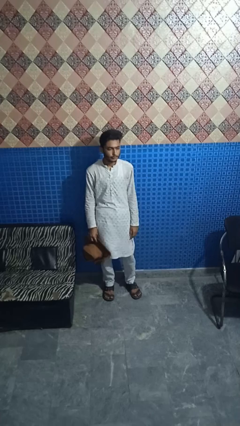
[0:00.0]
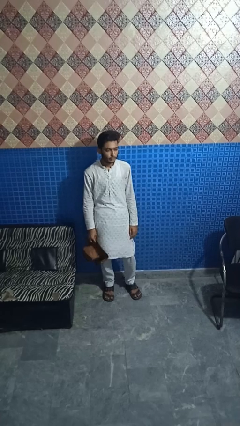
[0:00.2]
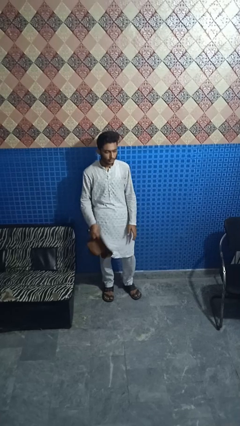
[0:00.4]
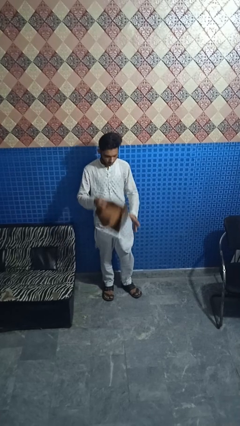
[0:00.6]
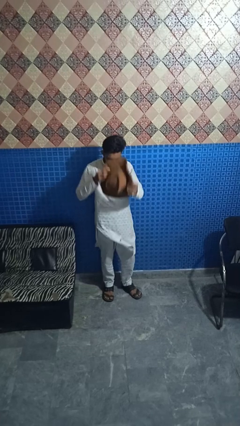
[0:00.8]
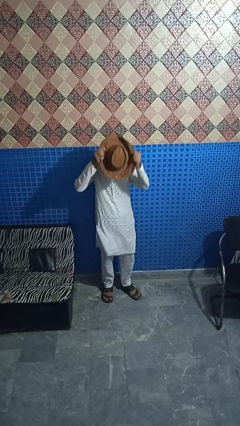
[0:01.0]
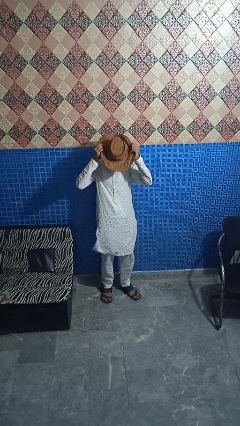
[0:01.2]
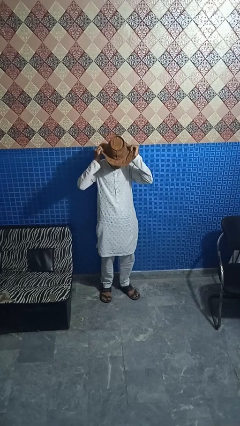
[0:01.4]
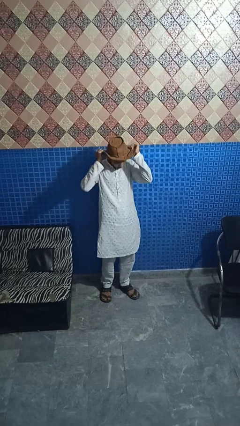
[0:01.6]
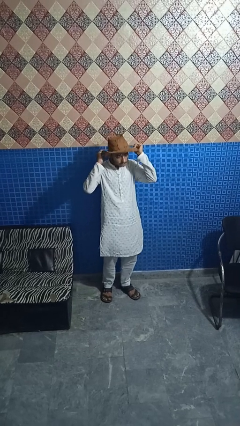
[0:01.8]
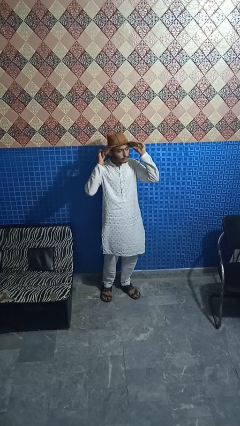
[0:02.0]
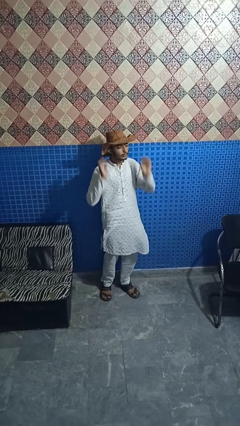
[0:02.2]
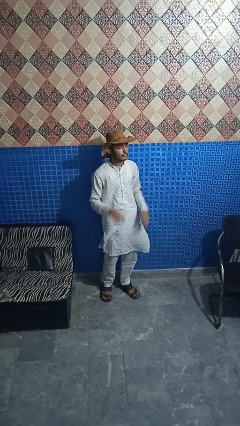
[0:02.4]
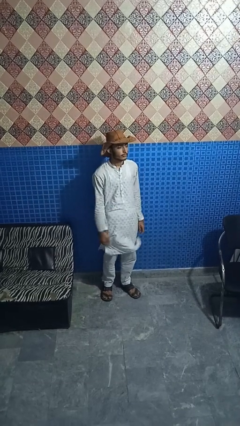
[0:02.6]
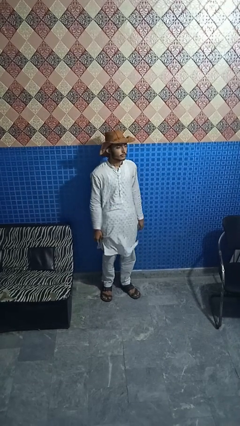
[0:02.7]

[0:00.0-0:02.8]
person puts on hat

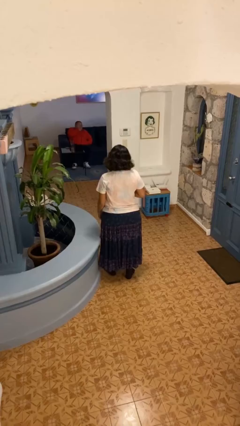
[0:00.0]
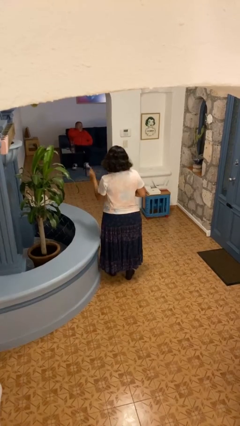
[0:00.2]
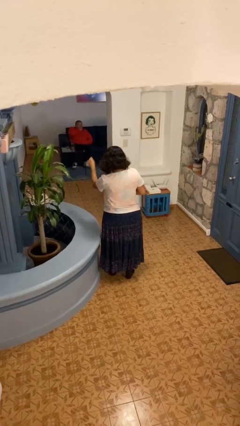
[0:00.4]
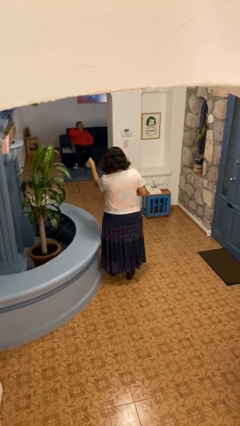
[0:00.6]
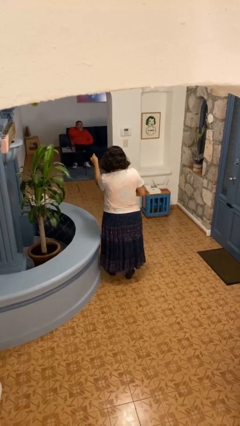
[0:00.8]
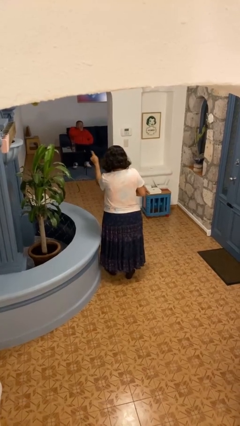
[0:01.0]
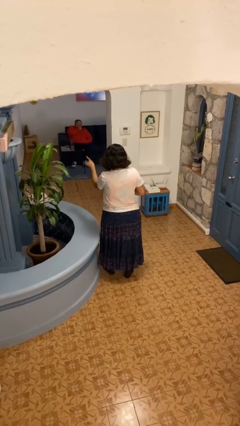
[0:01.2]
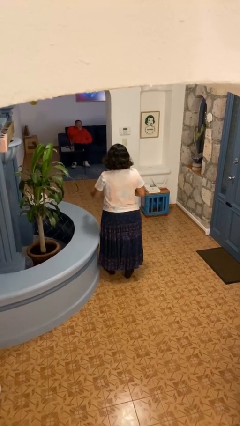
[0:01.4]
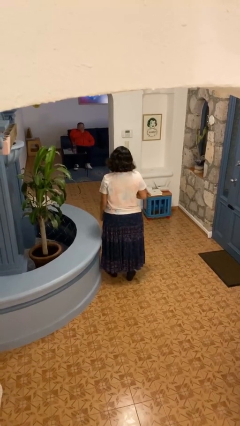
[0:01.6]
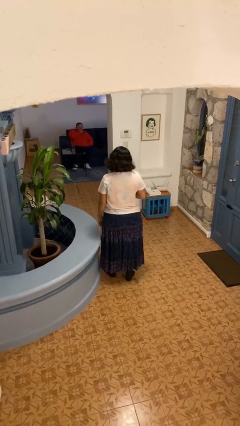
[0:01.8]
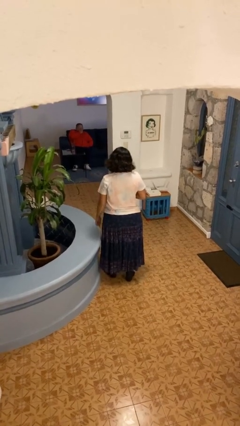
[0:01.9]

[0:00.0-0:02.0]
person points at person

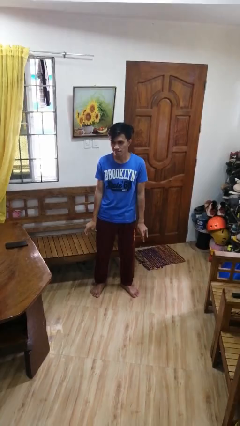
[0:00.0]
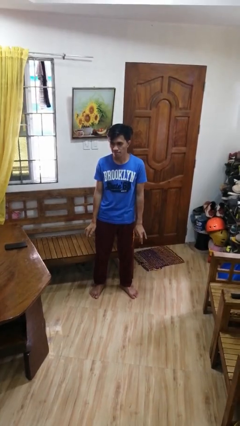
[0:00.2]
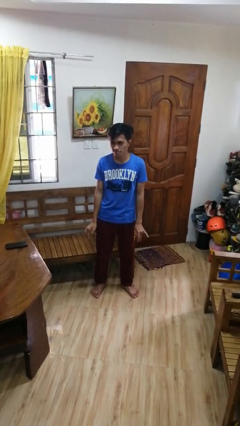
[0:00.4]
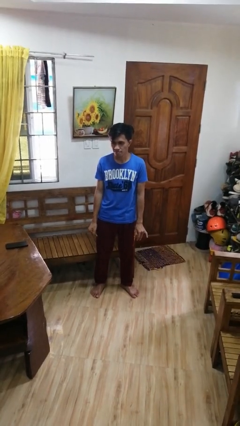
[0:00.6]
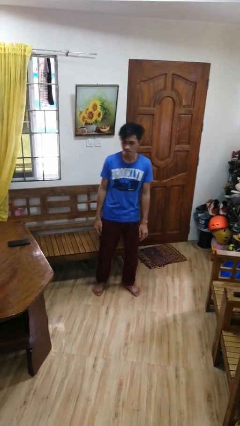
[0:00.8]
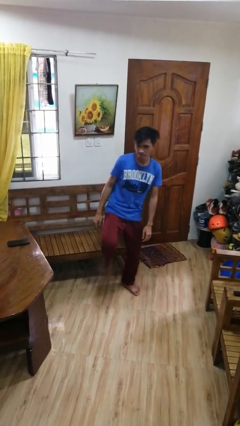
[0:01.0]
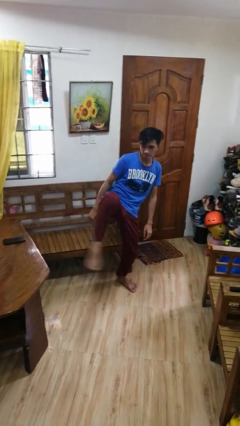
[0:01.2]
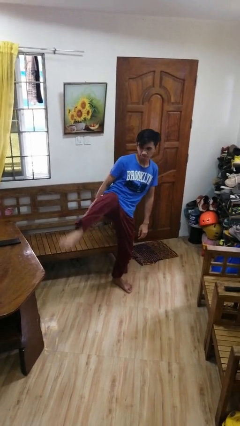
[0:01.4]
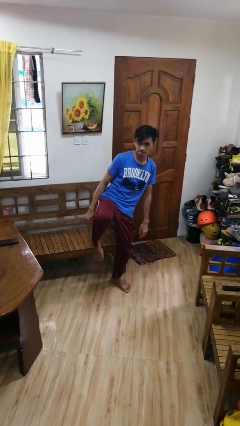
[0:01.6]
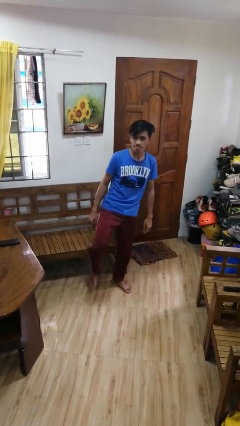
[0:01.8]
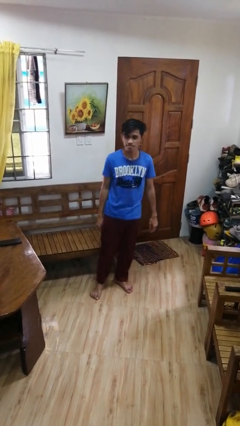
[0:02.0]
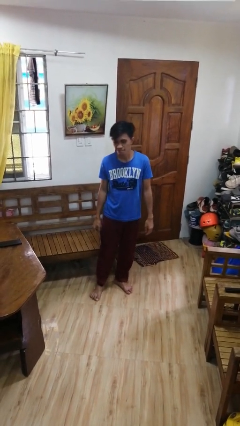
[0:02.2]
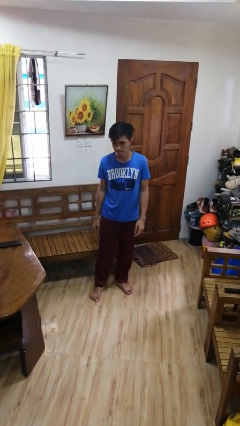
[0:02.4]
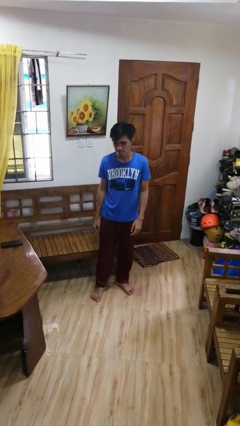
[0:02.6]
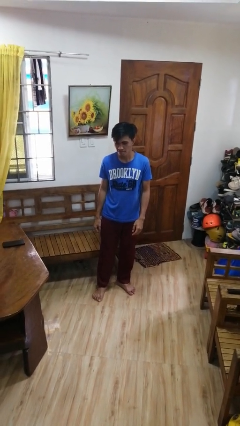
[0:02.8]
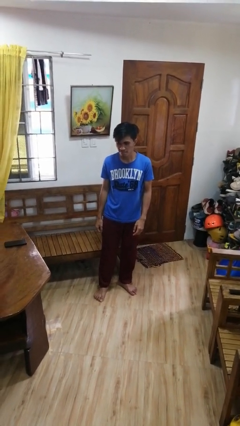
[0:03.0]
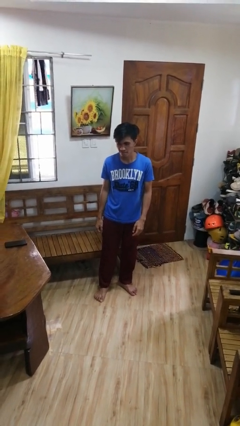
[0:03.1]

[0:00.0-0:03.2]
person karate kicks

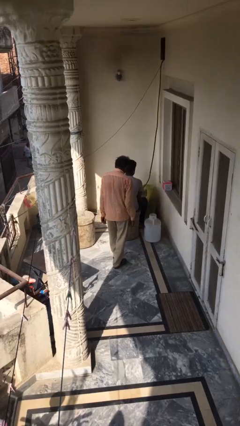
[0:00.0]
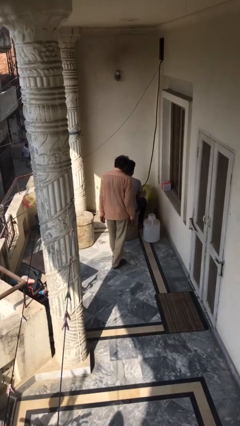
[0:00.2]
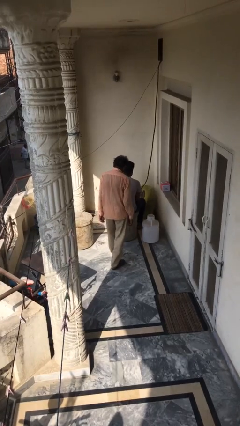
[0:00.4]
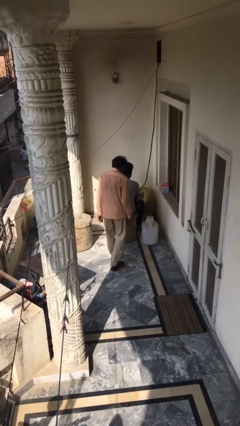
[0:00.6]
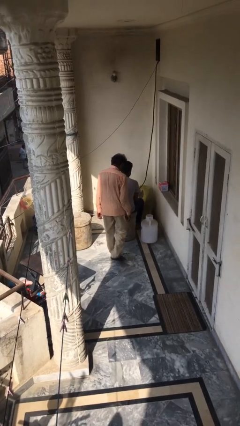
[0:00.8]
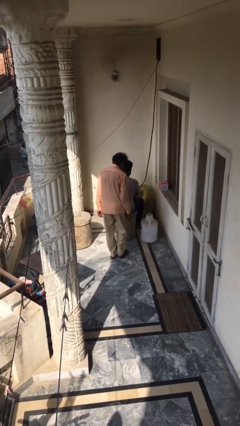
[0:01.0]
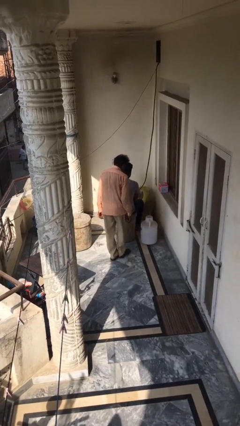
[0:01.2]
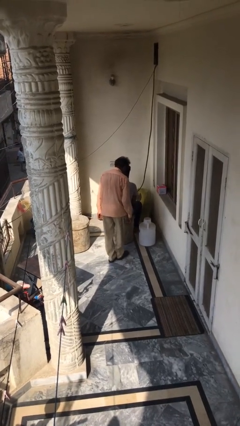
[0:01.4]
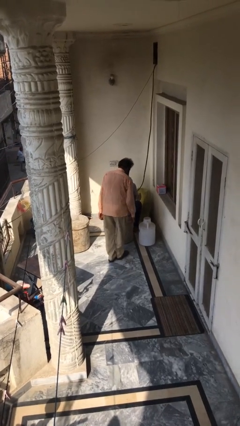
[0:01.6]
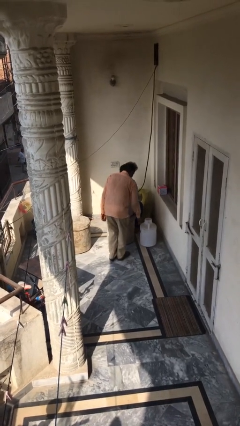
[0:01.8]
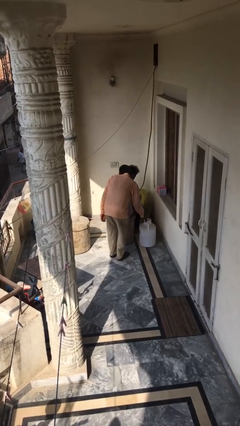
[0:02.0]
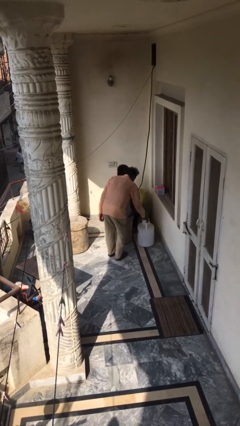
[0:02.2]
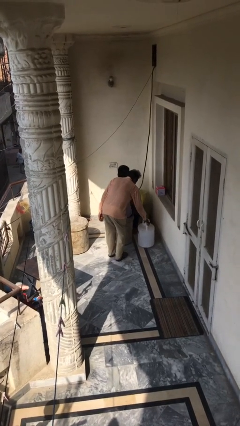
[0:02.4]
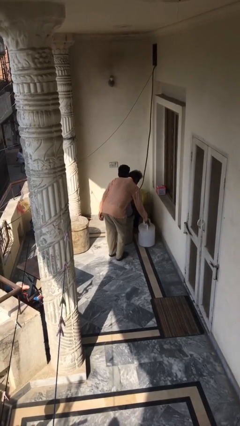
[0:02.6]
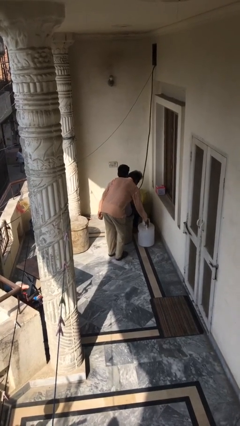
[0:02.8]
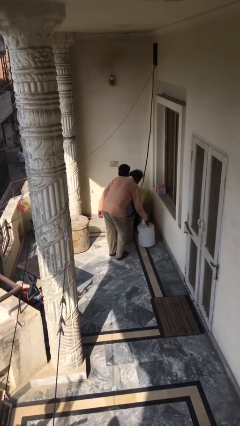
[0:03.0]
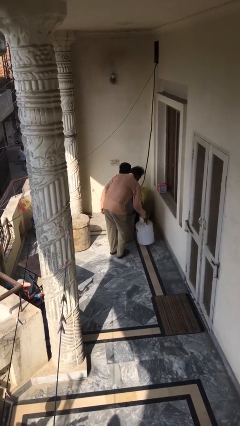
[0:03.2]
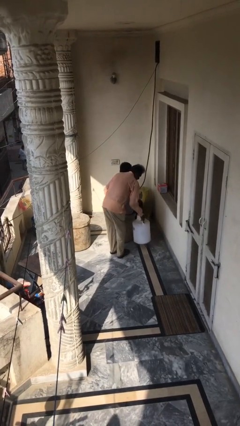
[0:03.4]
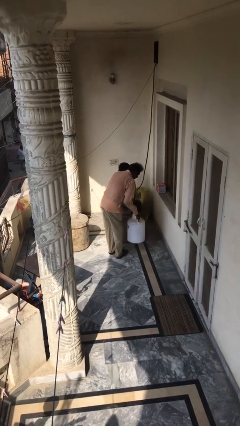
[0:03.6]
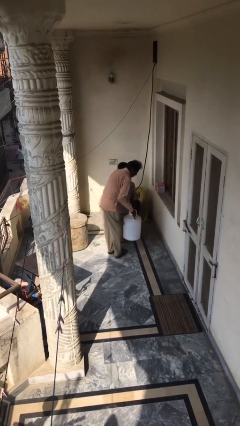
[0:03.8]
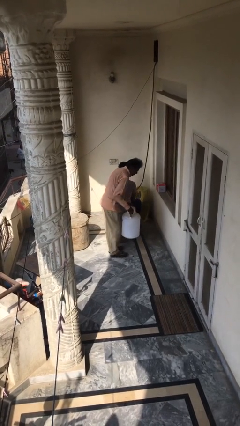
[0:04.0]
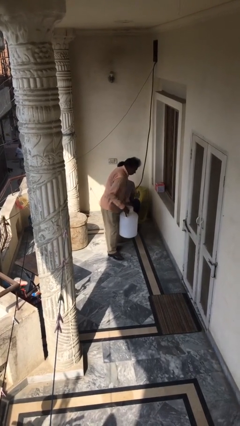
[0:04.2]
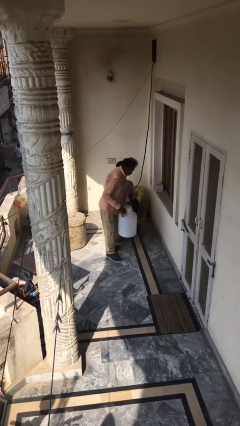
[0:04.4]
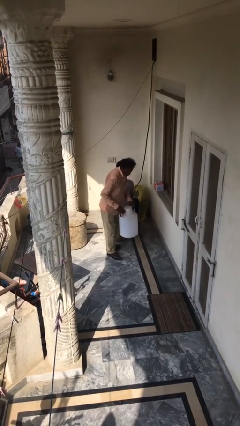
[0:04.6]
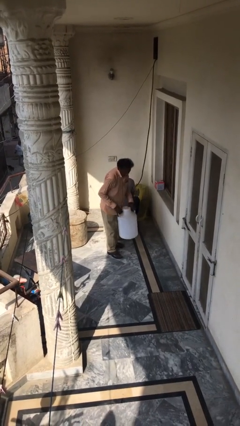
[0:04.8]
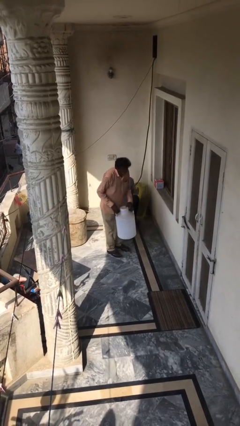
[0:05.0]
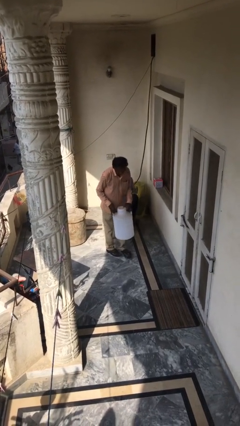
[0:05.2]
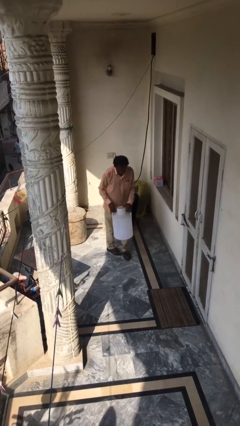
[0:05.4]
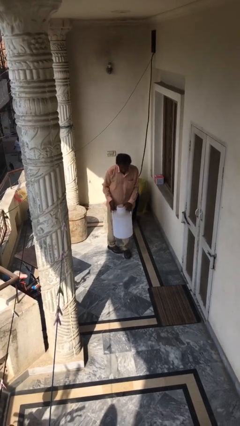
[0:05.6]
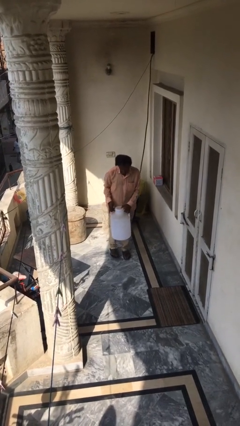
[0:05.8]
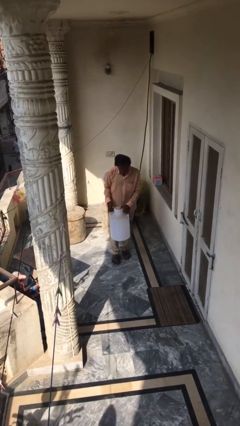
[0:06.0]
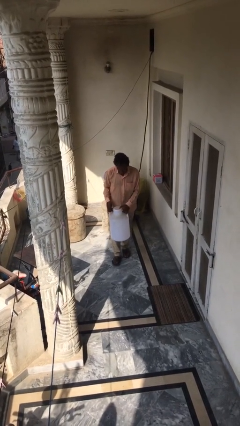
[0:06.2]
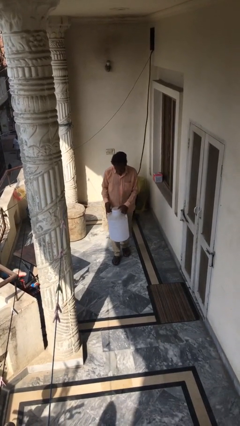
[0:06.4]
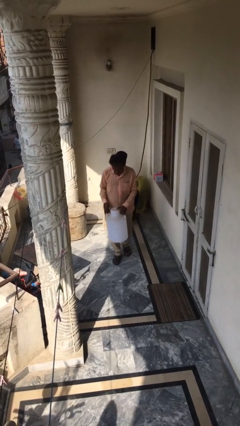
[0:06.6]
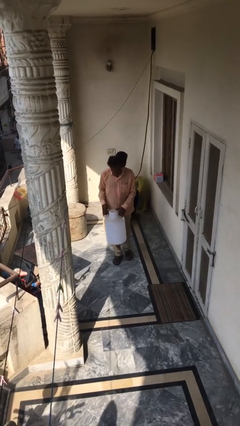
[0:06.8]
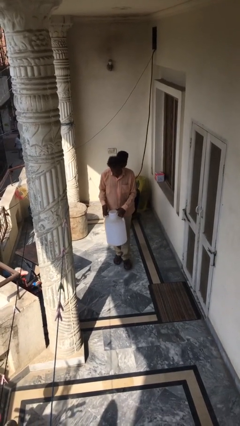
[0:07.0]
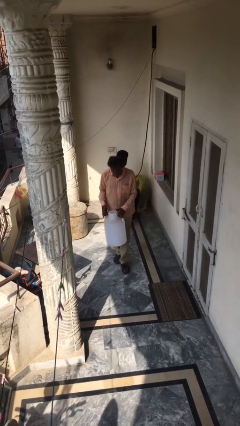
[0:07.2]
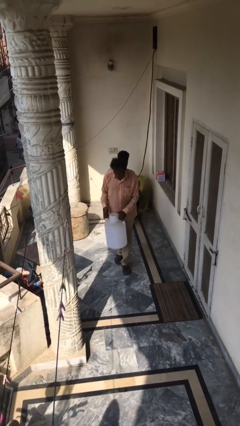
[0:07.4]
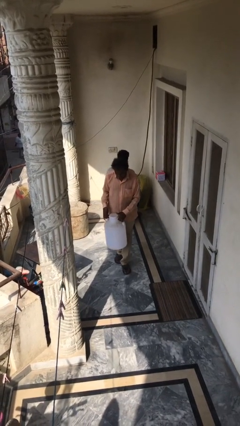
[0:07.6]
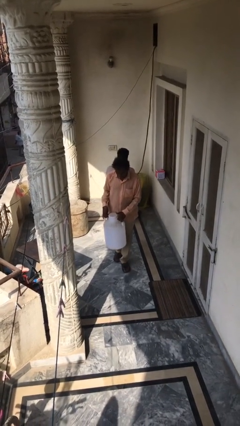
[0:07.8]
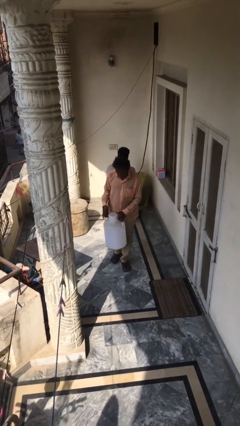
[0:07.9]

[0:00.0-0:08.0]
person steals object from person

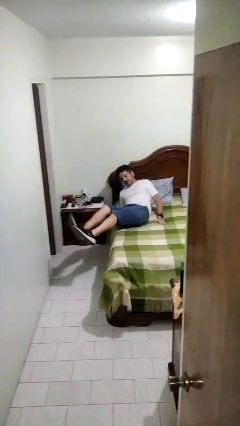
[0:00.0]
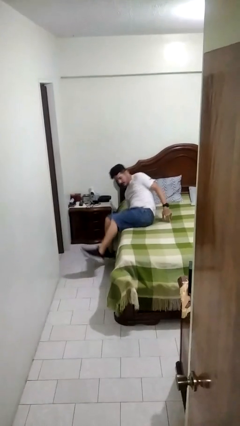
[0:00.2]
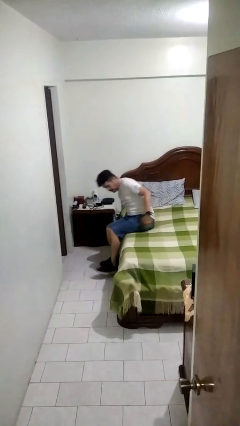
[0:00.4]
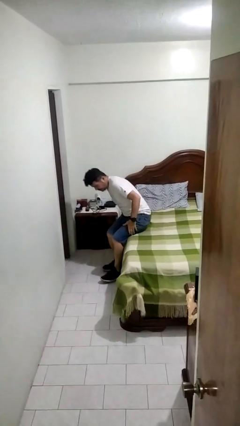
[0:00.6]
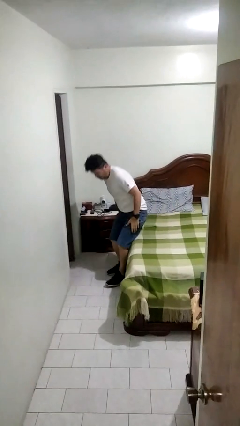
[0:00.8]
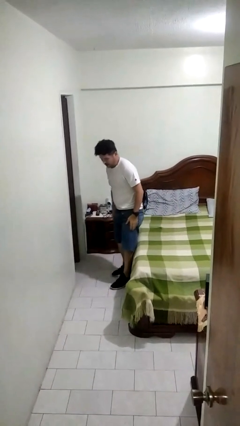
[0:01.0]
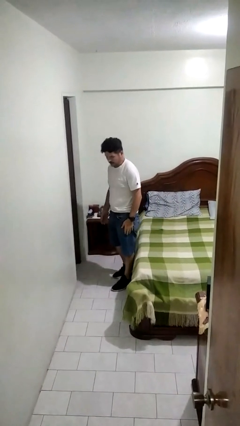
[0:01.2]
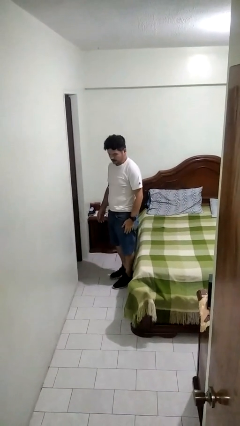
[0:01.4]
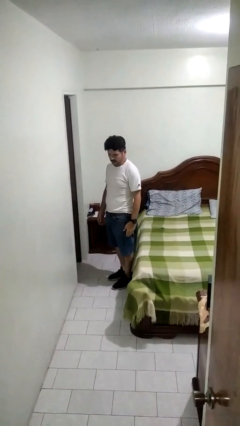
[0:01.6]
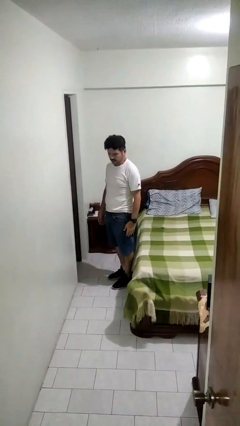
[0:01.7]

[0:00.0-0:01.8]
person stands up
